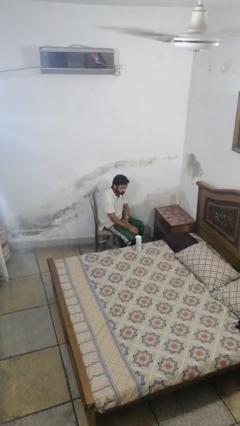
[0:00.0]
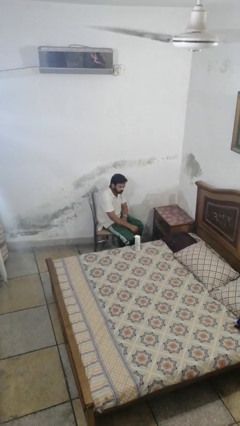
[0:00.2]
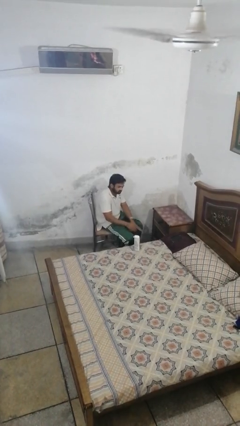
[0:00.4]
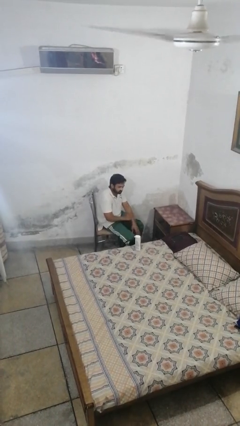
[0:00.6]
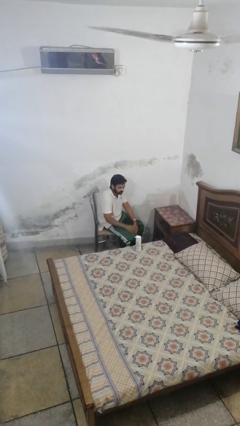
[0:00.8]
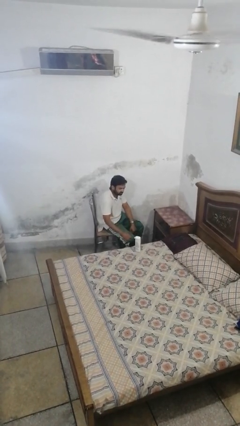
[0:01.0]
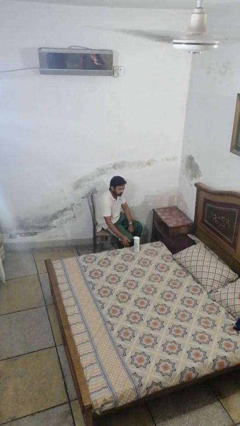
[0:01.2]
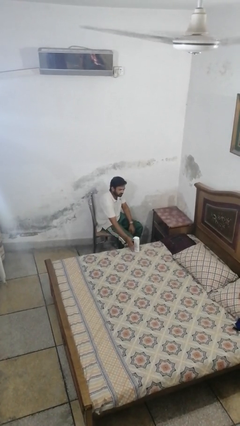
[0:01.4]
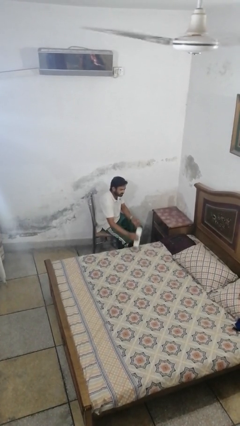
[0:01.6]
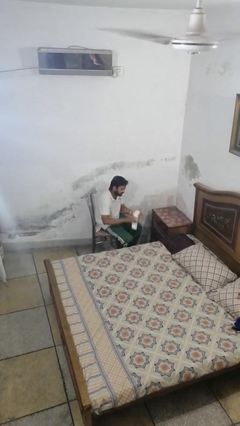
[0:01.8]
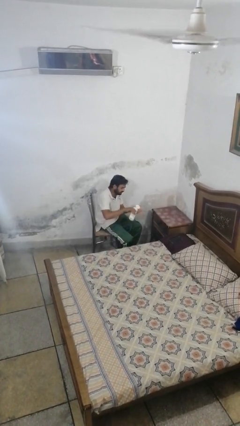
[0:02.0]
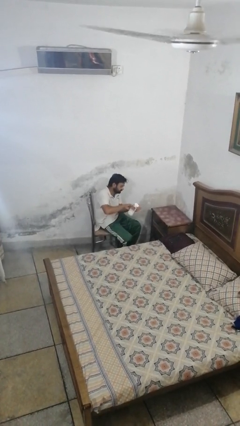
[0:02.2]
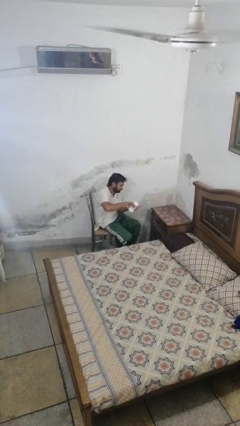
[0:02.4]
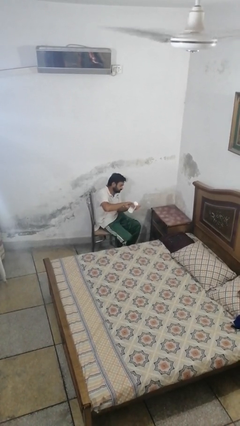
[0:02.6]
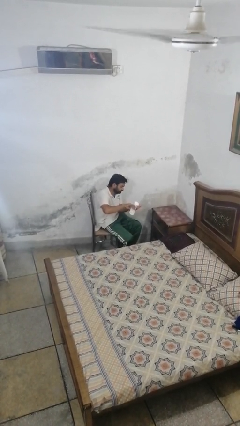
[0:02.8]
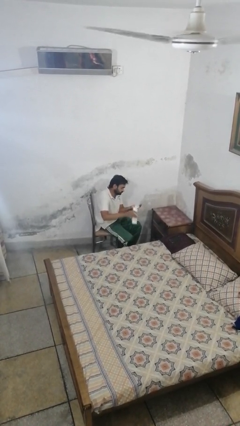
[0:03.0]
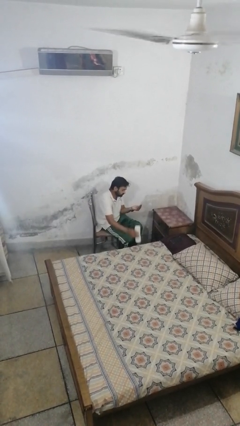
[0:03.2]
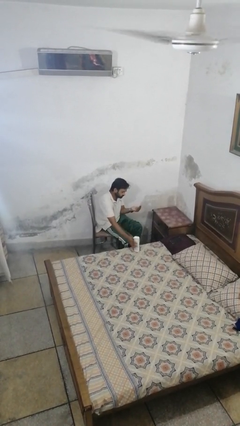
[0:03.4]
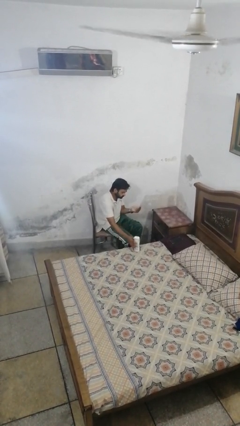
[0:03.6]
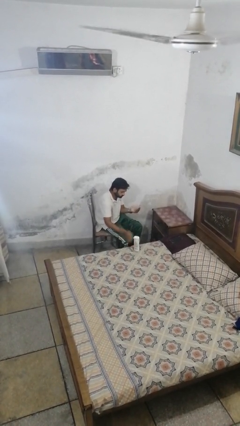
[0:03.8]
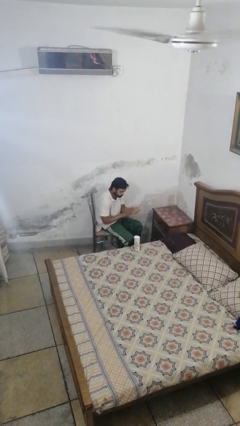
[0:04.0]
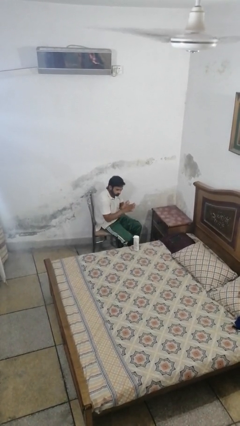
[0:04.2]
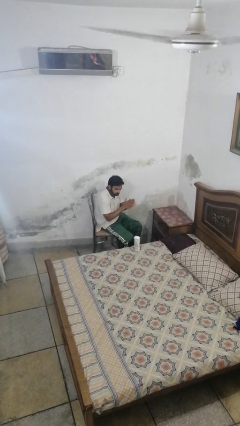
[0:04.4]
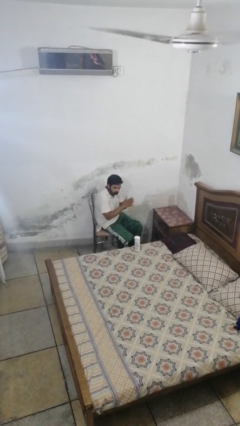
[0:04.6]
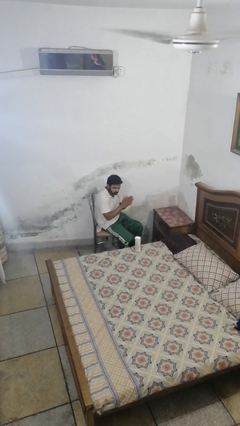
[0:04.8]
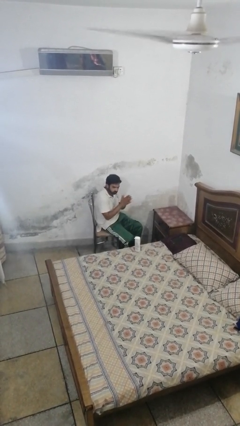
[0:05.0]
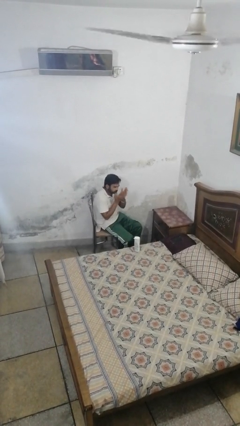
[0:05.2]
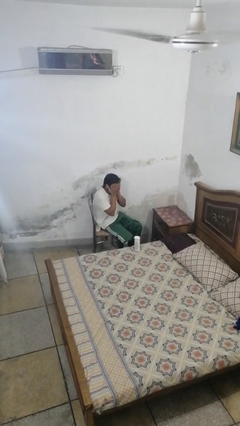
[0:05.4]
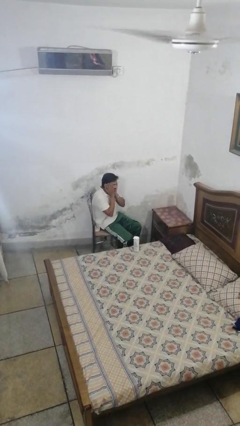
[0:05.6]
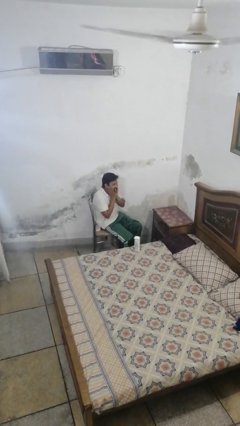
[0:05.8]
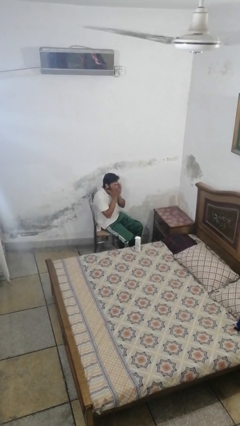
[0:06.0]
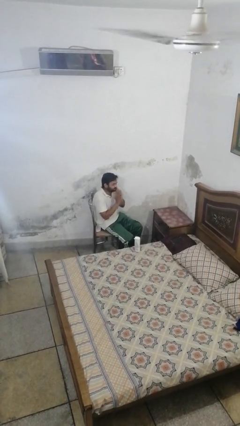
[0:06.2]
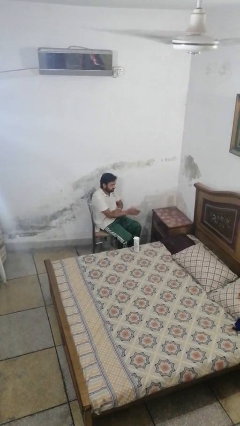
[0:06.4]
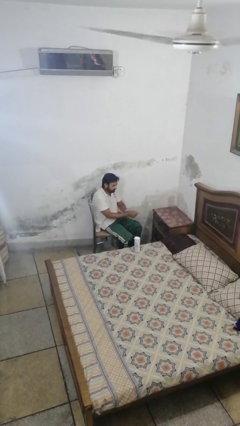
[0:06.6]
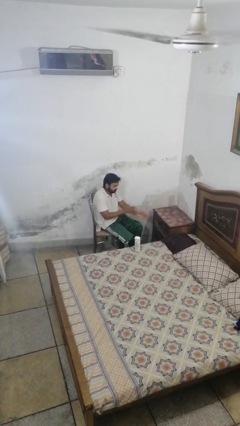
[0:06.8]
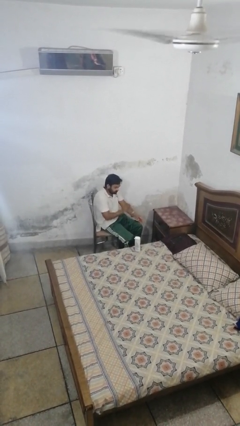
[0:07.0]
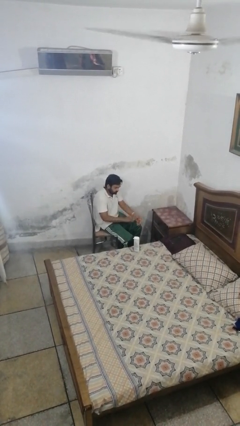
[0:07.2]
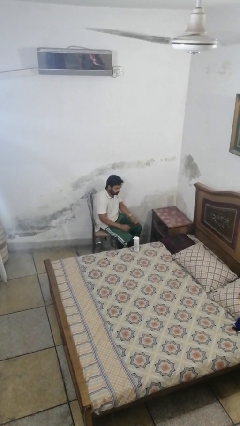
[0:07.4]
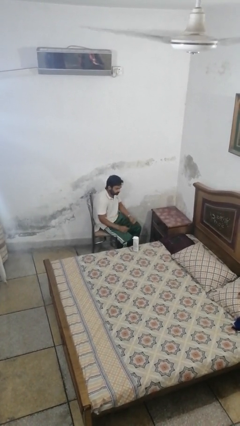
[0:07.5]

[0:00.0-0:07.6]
person applies facial moisturizer

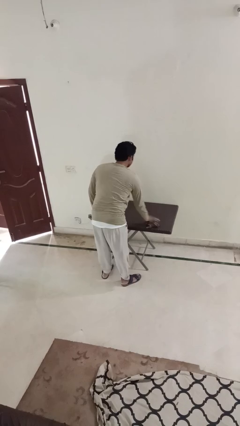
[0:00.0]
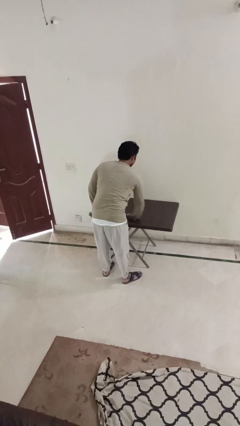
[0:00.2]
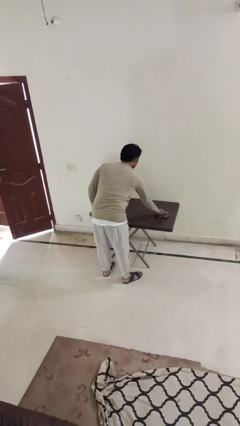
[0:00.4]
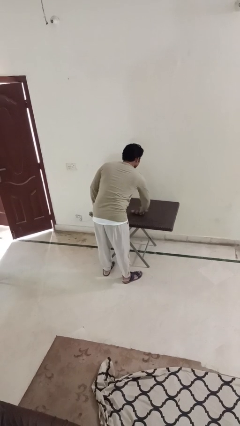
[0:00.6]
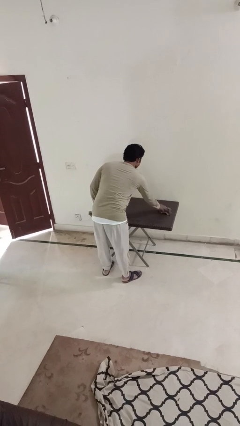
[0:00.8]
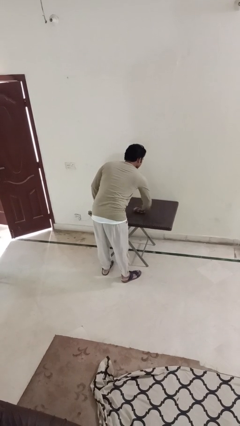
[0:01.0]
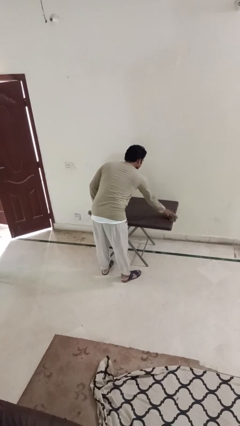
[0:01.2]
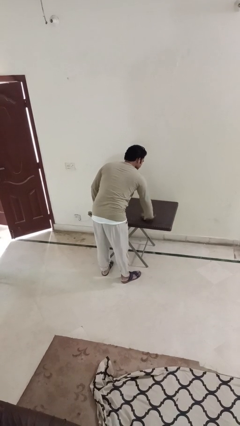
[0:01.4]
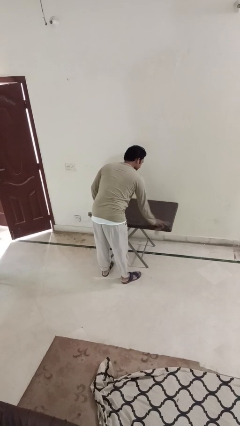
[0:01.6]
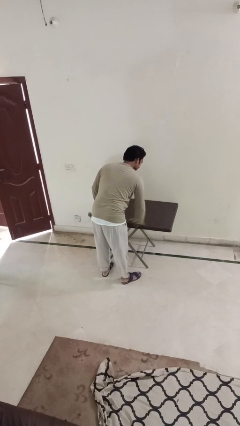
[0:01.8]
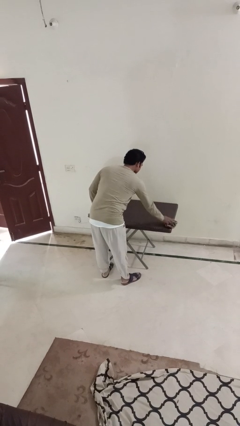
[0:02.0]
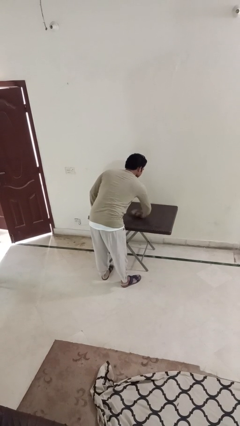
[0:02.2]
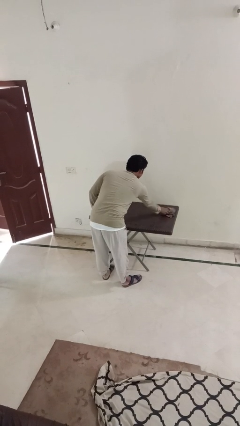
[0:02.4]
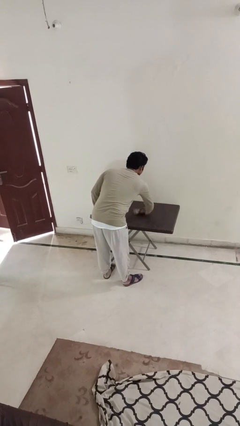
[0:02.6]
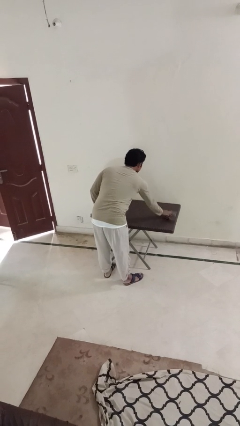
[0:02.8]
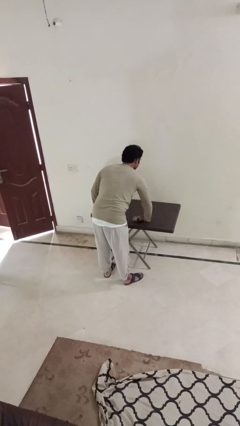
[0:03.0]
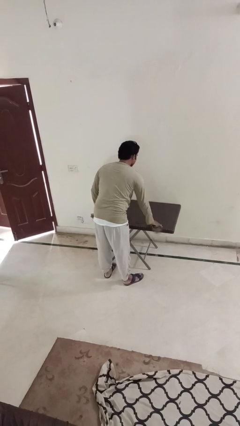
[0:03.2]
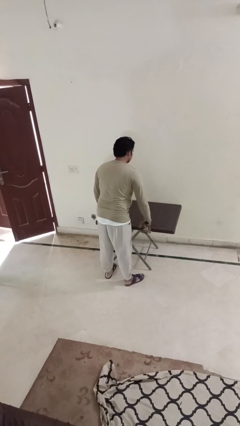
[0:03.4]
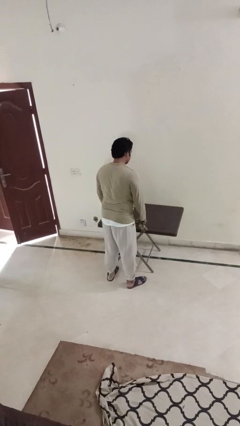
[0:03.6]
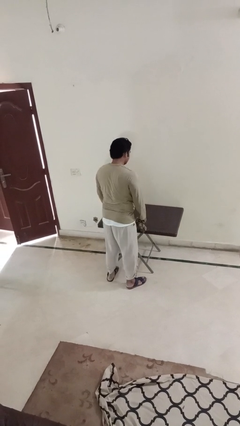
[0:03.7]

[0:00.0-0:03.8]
person cleans table with rag

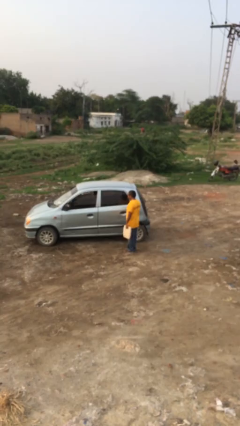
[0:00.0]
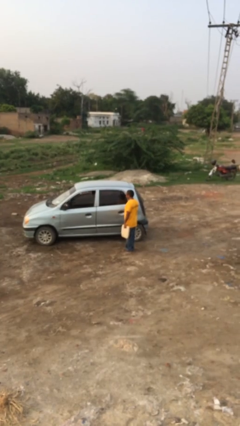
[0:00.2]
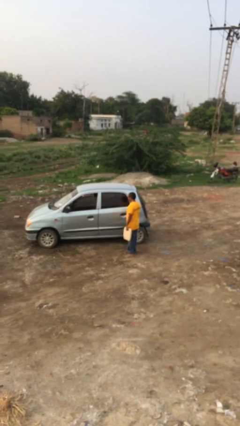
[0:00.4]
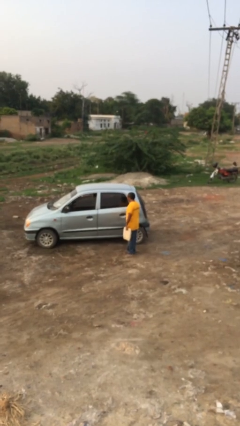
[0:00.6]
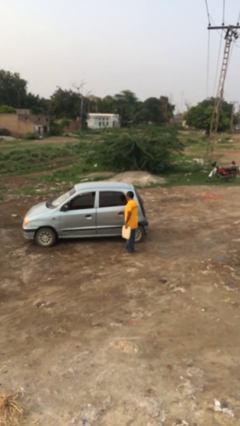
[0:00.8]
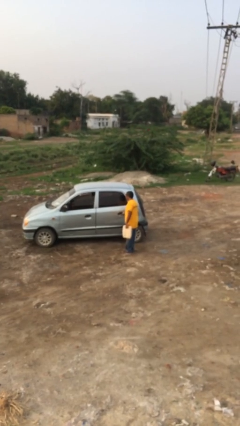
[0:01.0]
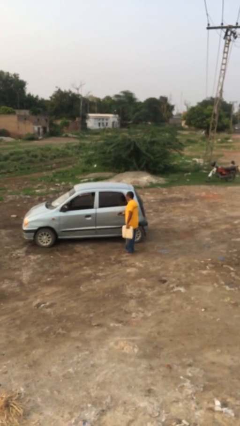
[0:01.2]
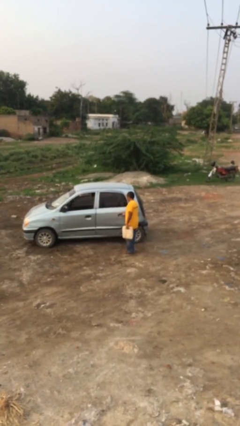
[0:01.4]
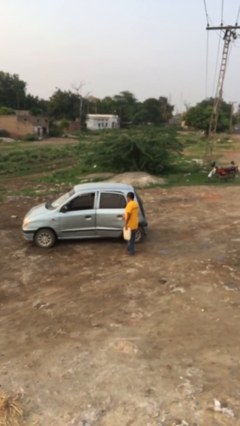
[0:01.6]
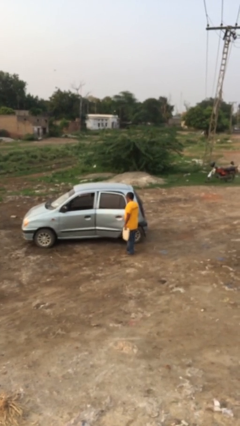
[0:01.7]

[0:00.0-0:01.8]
person opens car door

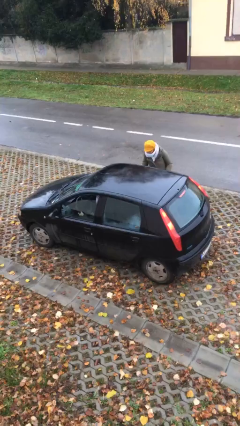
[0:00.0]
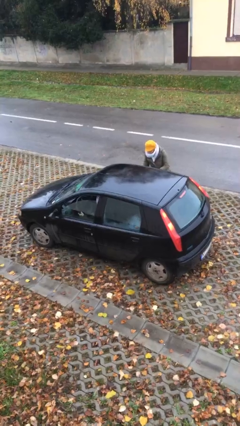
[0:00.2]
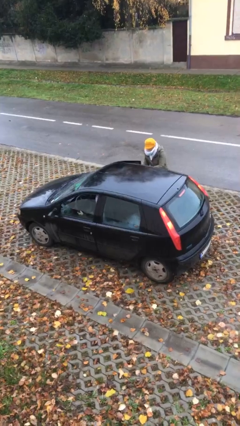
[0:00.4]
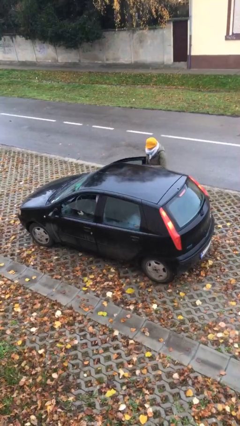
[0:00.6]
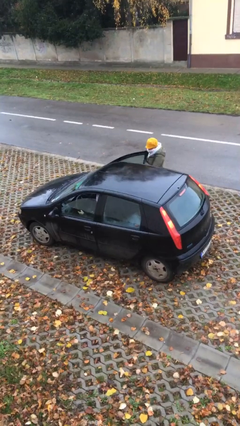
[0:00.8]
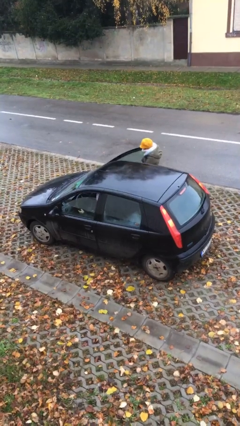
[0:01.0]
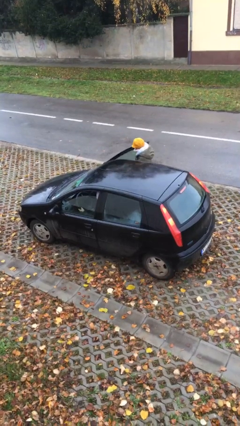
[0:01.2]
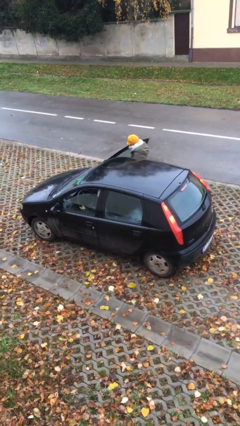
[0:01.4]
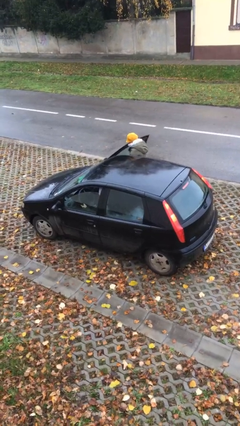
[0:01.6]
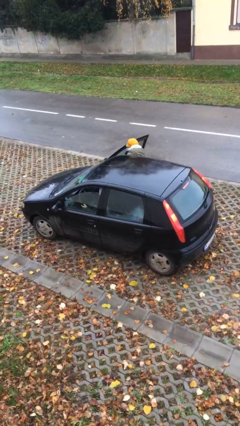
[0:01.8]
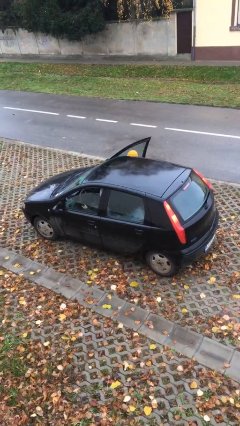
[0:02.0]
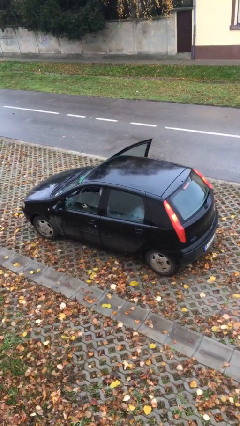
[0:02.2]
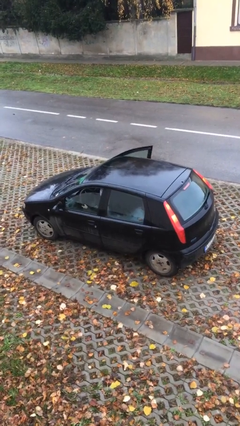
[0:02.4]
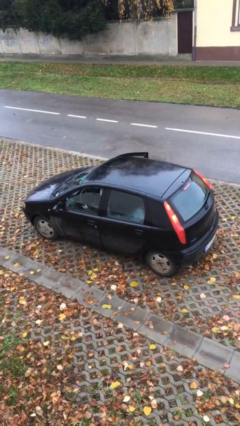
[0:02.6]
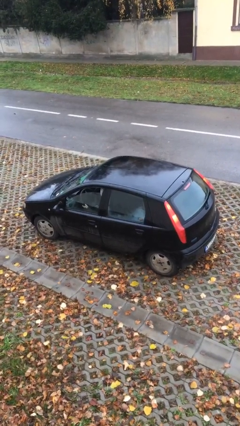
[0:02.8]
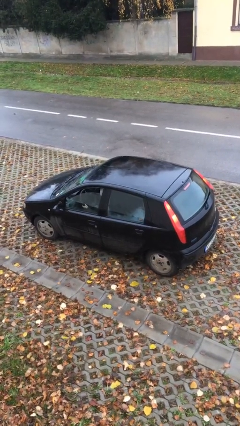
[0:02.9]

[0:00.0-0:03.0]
car picks up person

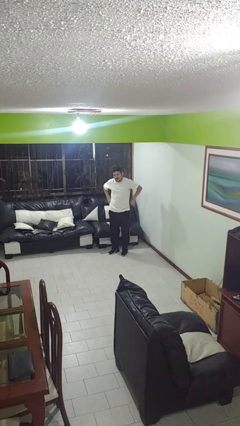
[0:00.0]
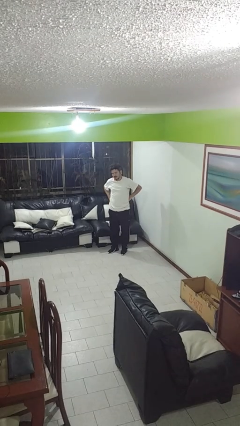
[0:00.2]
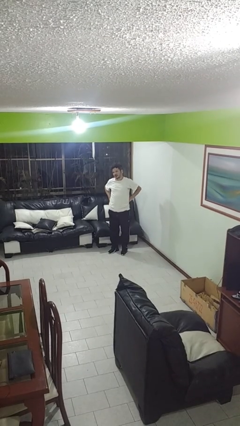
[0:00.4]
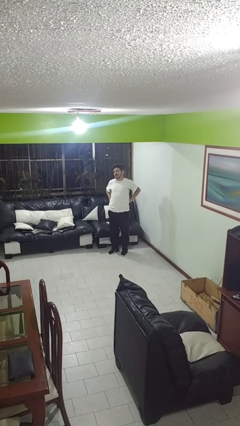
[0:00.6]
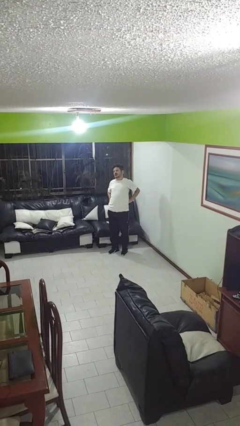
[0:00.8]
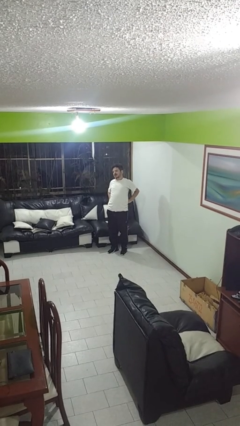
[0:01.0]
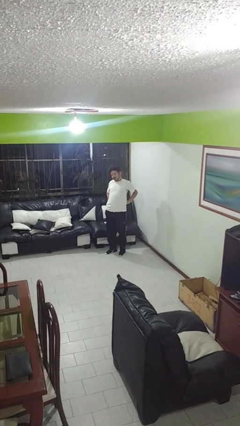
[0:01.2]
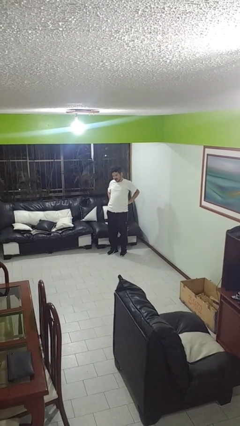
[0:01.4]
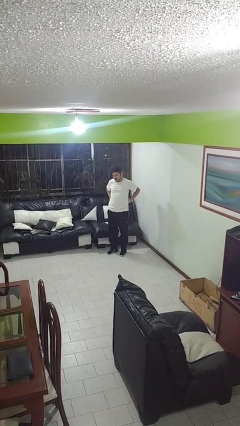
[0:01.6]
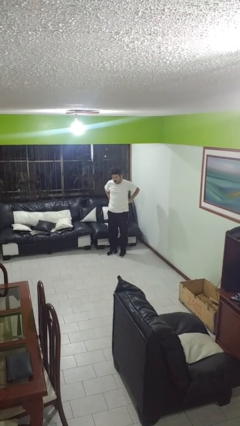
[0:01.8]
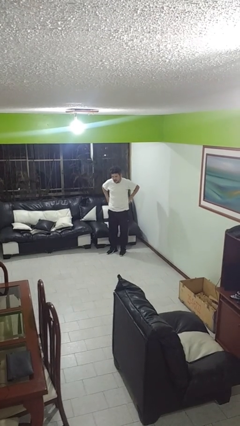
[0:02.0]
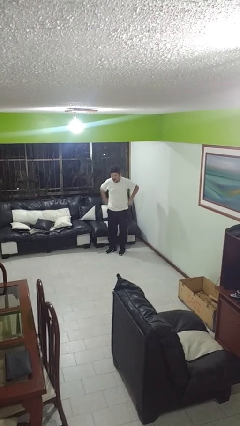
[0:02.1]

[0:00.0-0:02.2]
person stretches back
